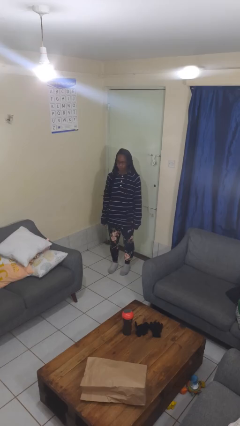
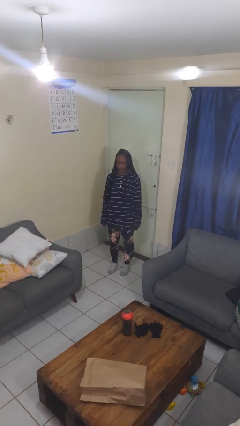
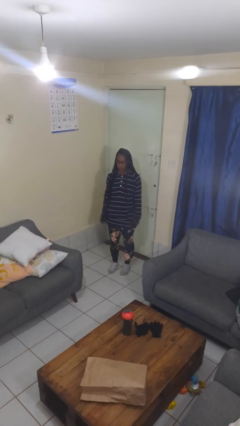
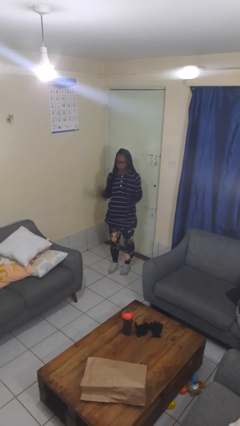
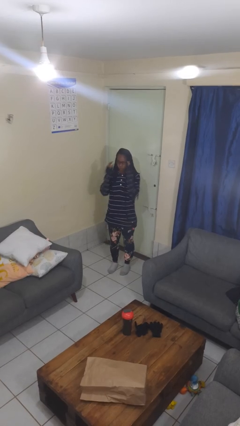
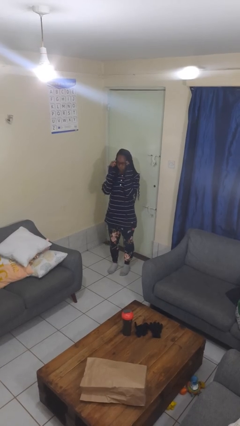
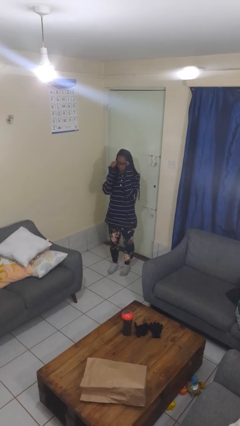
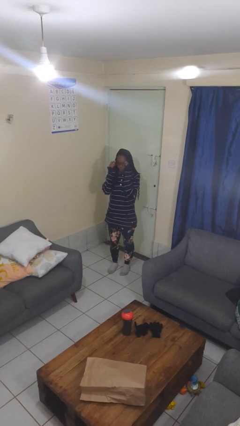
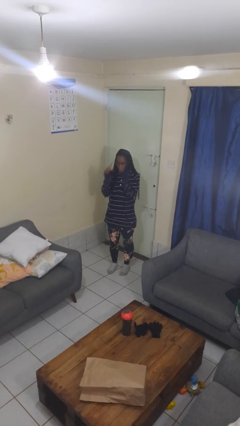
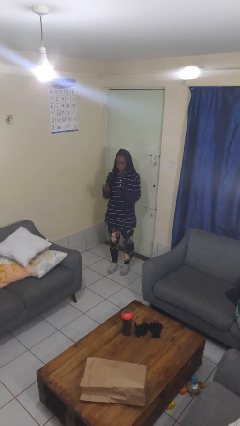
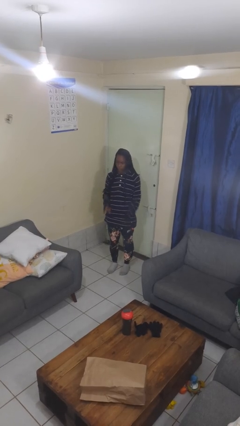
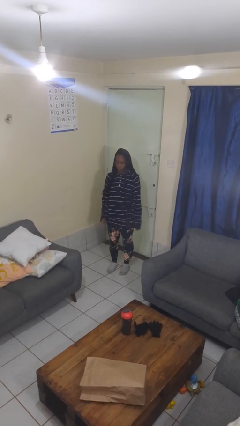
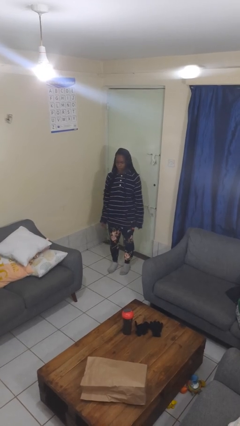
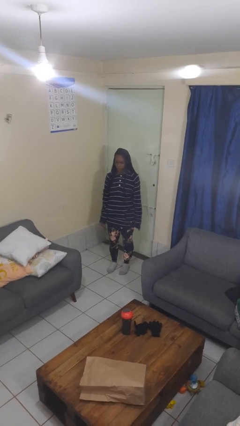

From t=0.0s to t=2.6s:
person takes off glasses

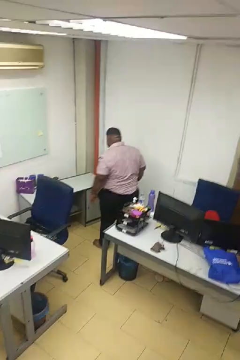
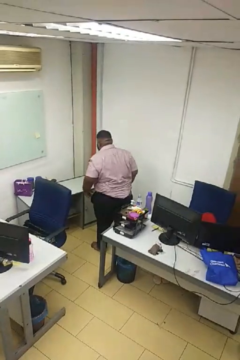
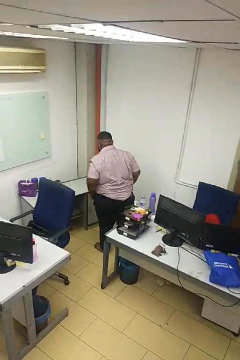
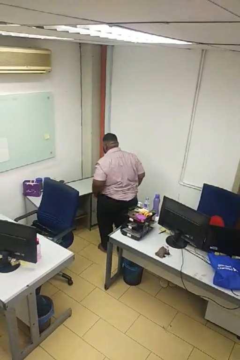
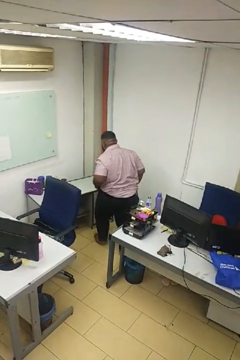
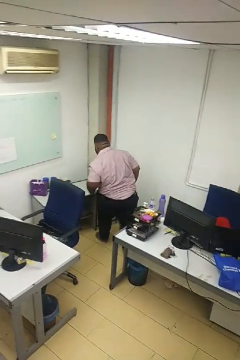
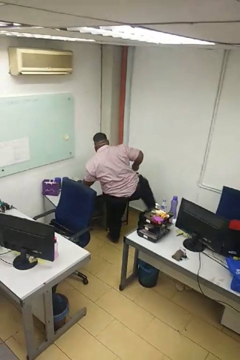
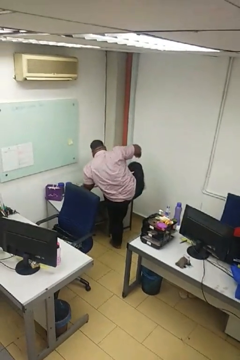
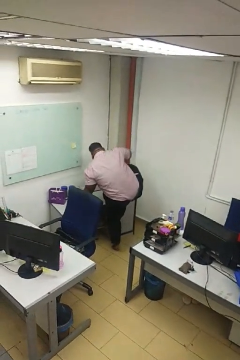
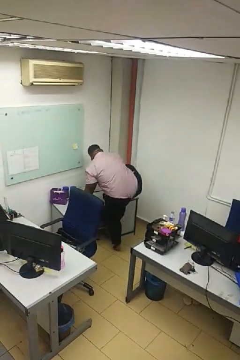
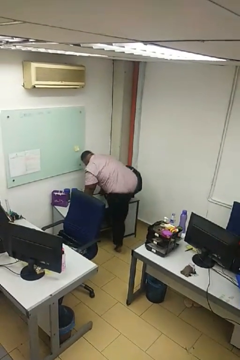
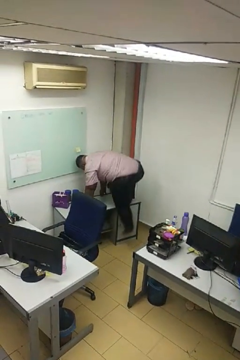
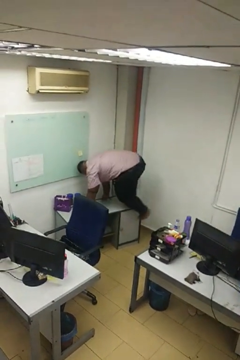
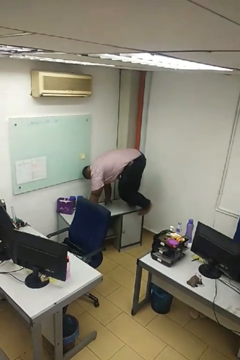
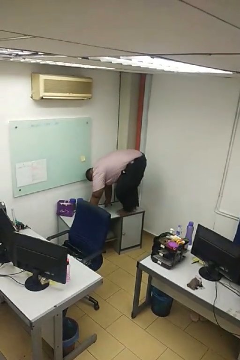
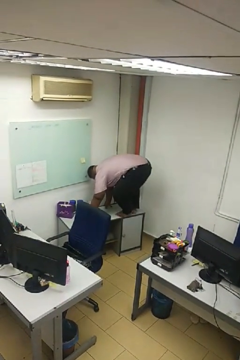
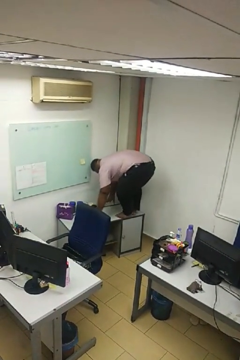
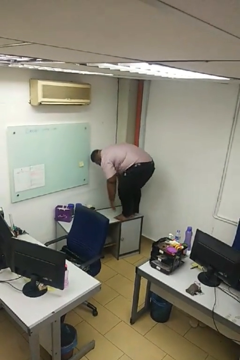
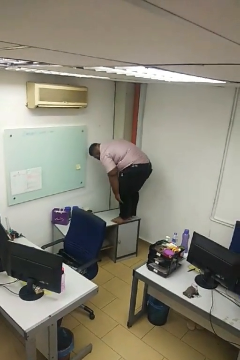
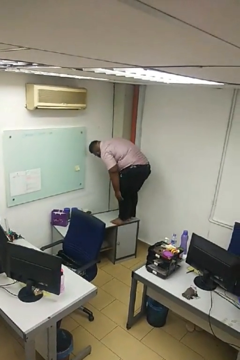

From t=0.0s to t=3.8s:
person climbs on table

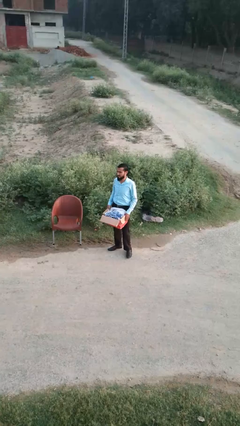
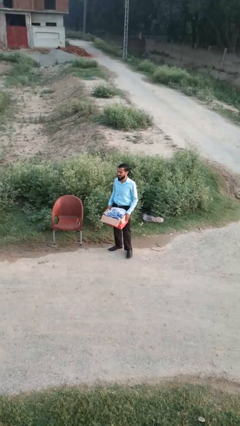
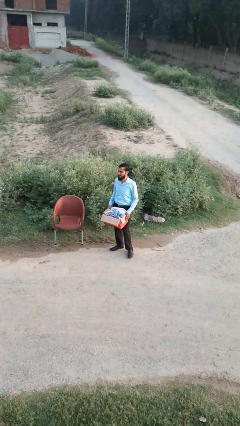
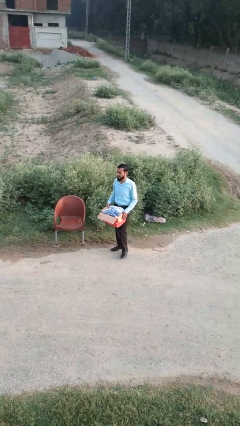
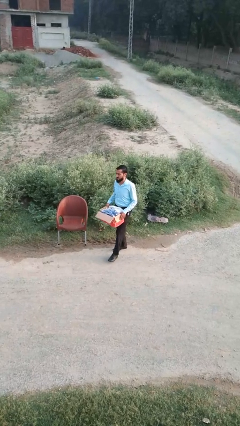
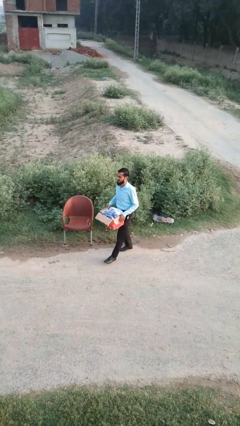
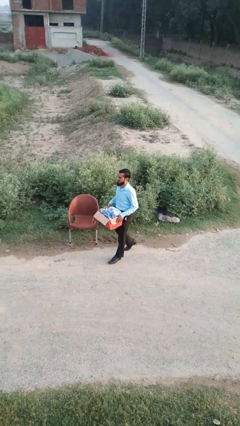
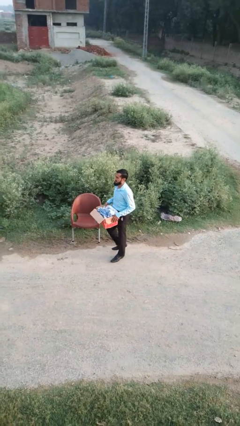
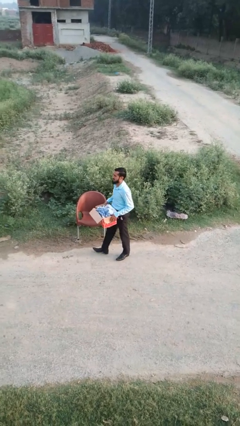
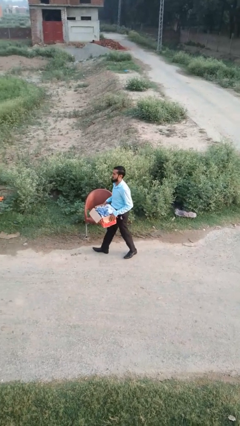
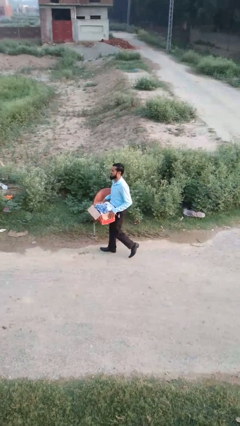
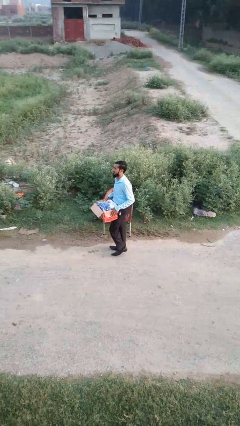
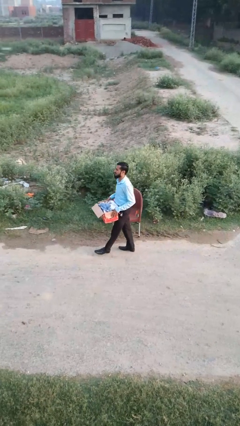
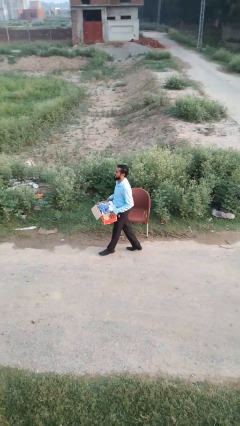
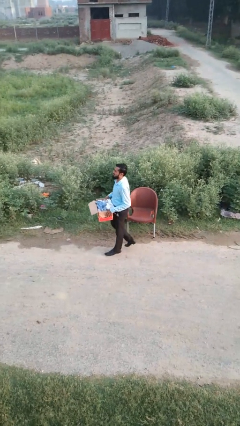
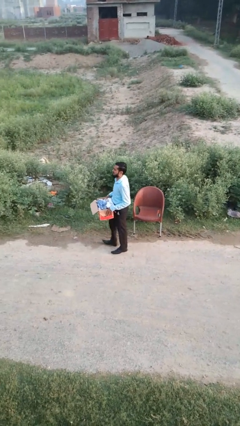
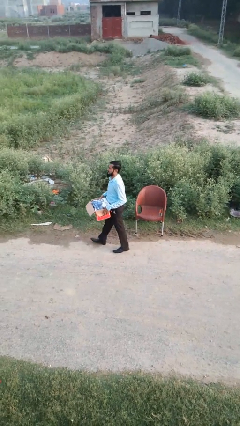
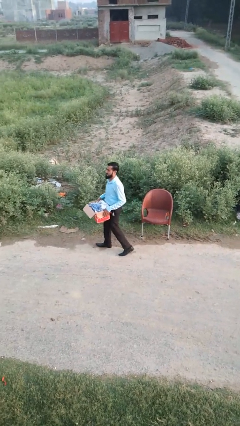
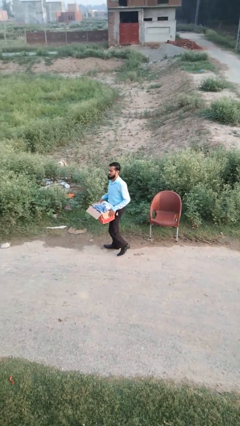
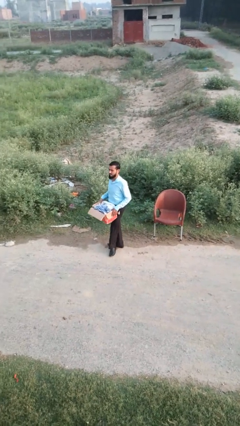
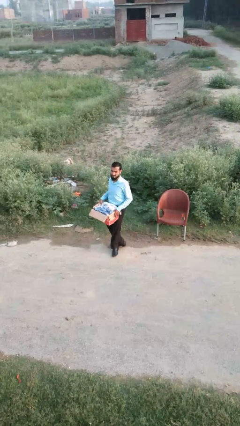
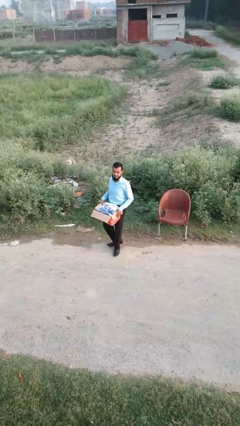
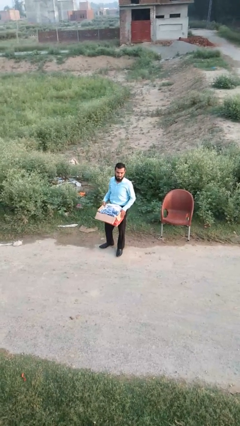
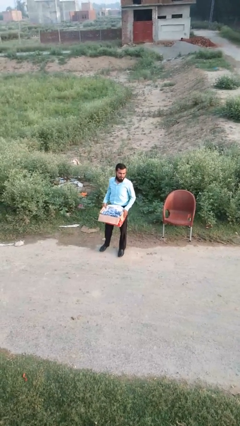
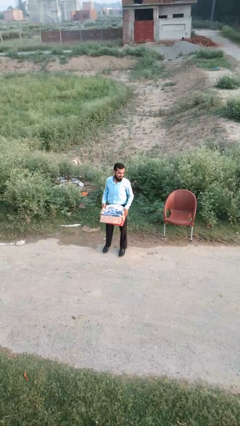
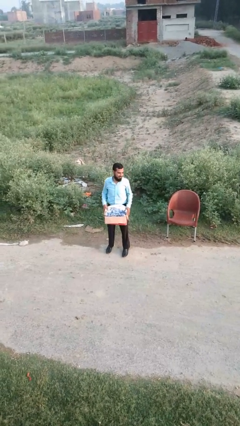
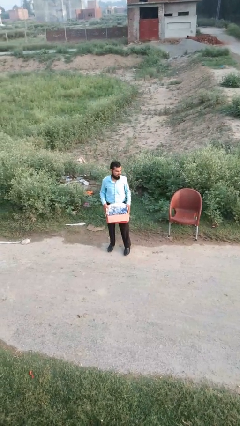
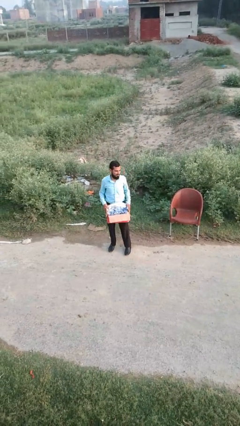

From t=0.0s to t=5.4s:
person carries laundry basket

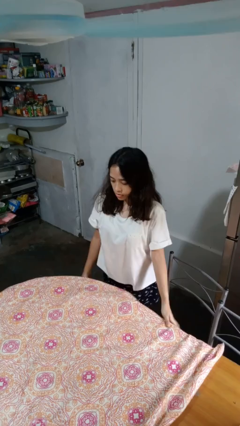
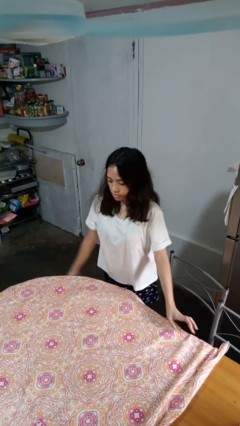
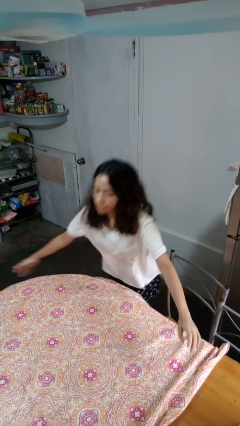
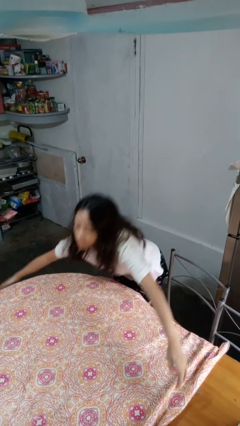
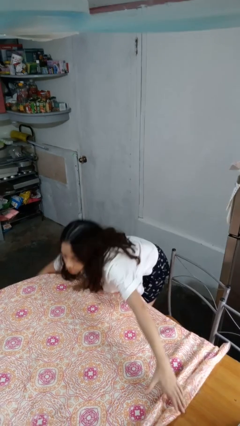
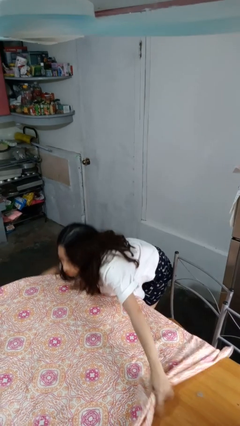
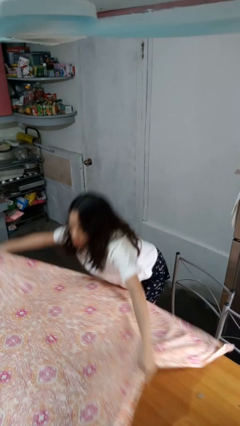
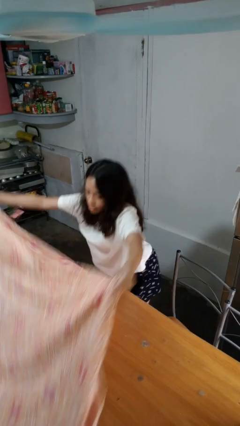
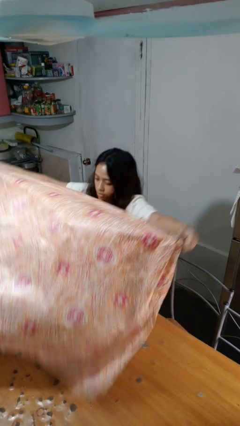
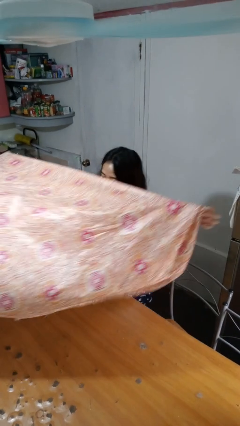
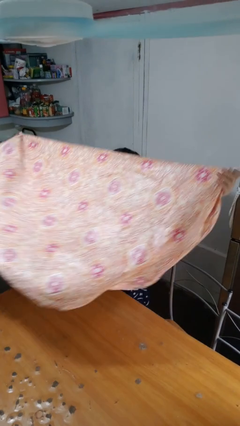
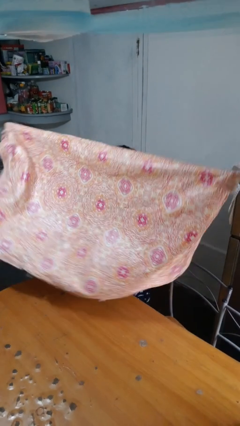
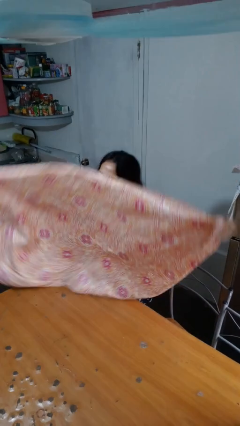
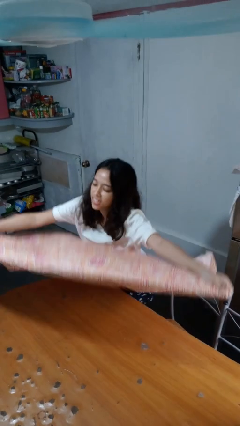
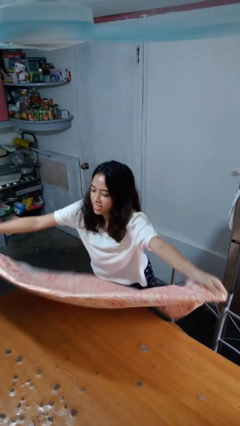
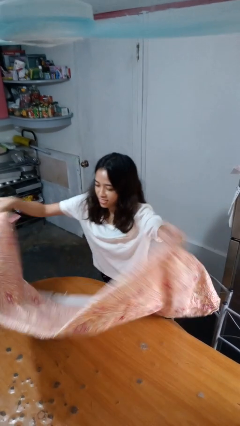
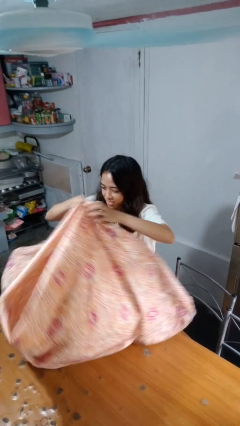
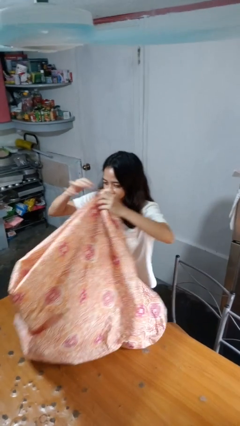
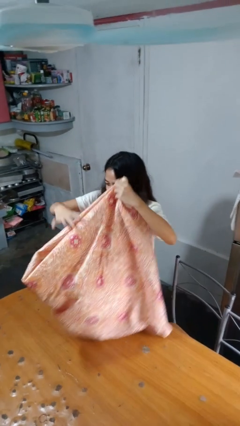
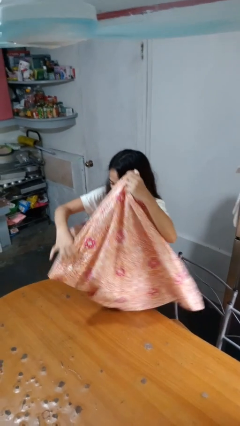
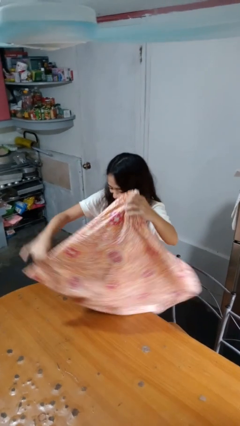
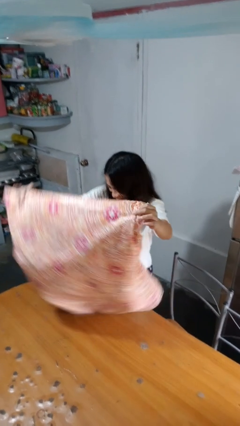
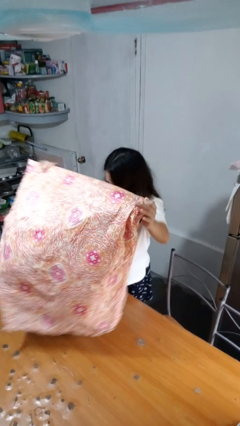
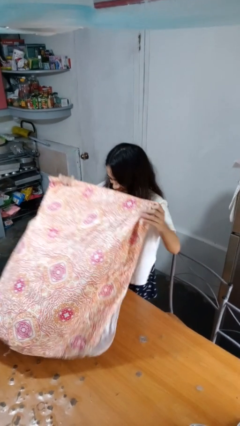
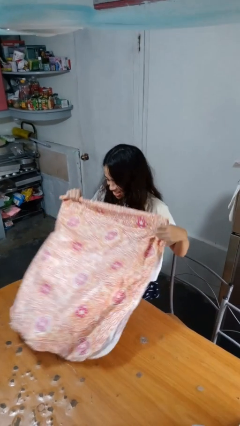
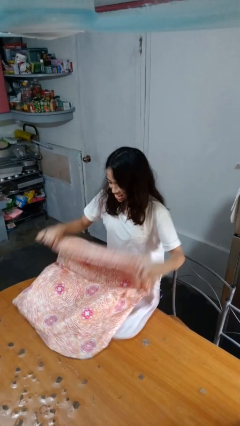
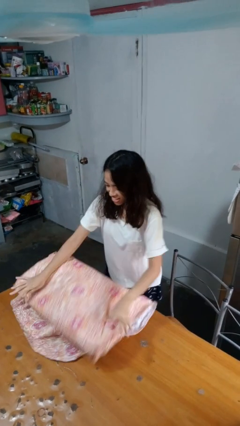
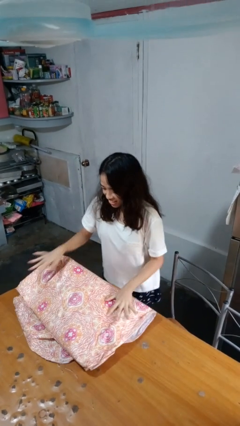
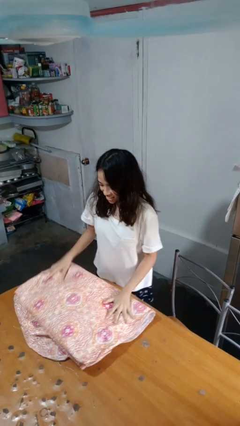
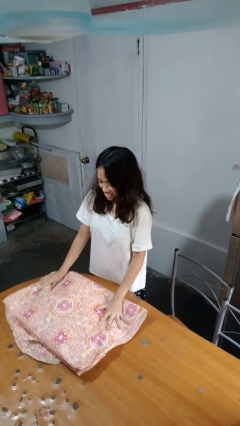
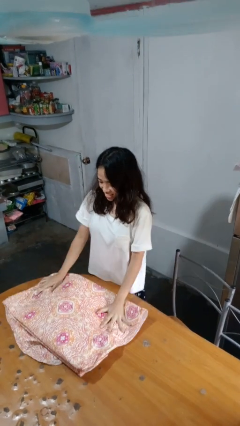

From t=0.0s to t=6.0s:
person folds tablecloth

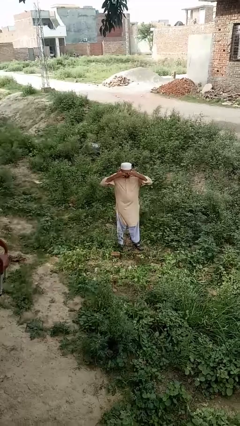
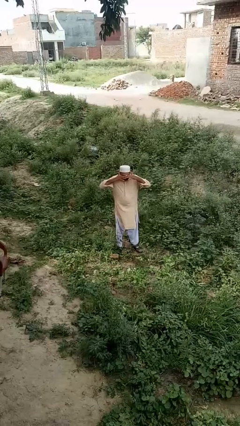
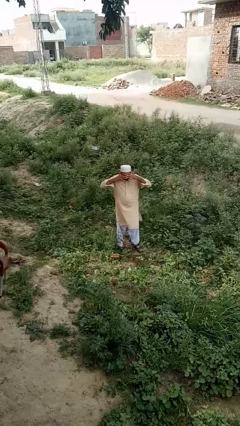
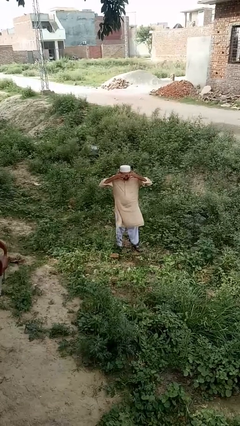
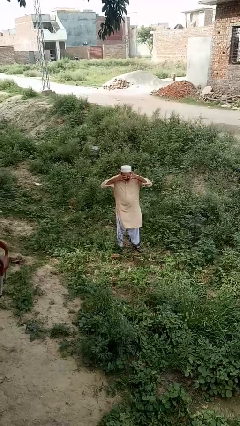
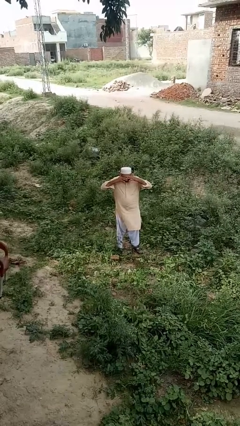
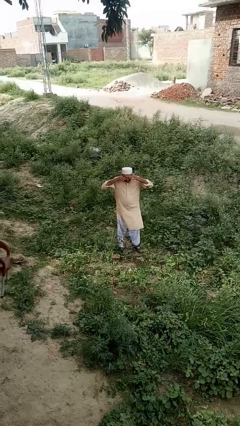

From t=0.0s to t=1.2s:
person rubs eyes
